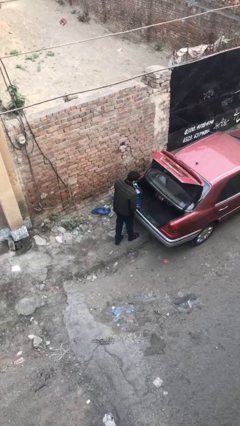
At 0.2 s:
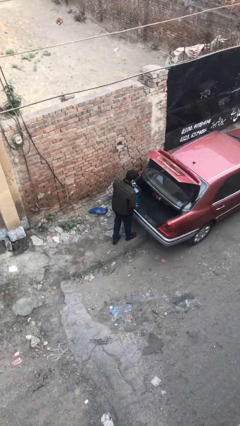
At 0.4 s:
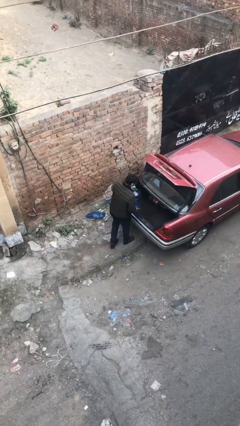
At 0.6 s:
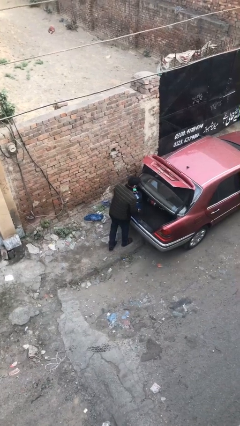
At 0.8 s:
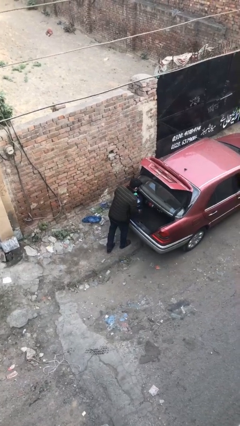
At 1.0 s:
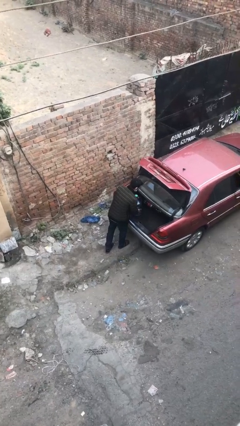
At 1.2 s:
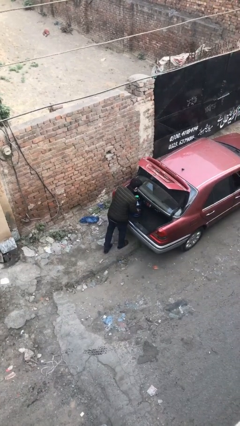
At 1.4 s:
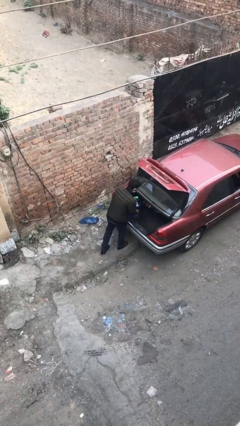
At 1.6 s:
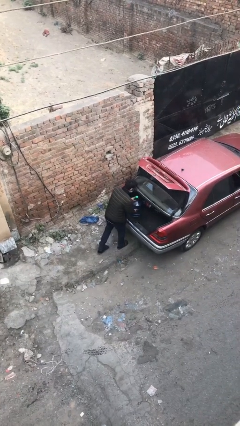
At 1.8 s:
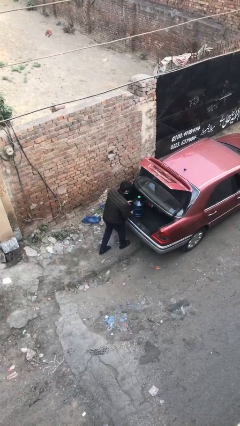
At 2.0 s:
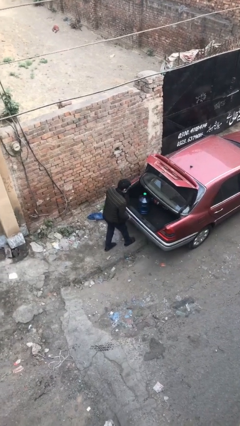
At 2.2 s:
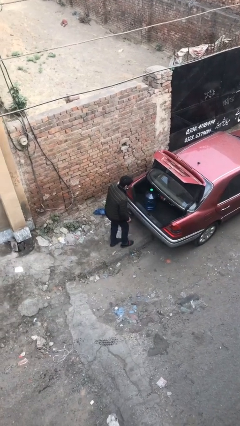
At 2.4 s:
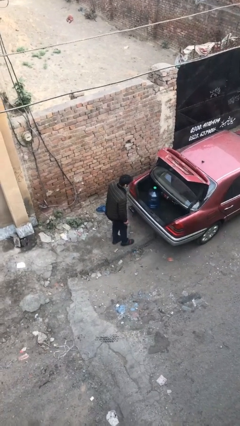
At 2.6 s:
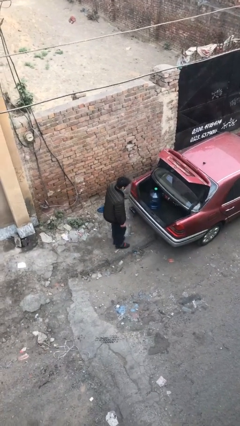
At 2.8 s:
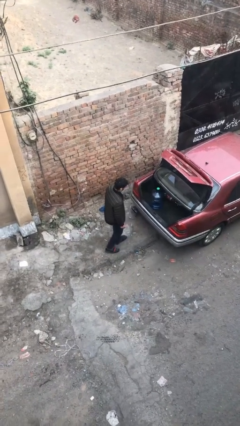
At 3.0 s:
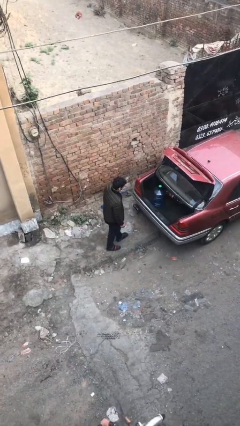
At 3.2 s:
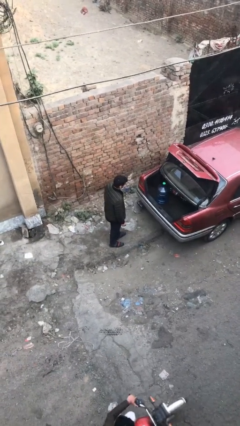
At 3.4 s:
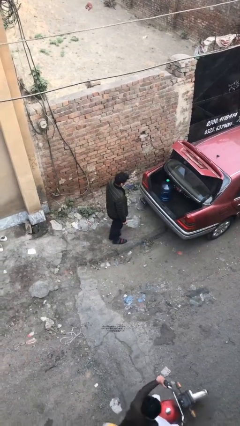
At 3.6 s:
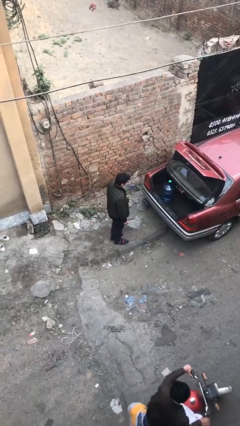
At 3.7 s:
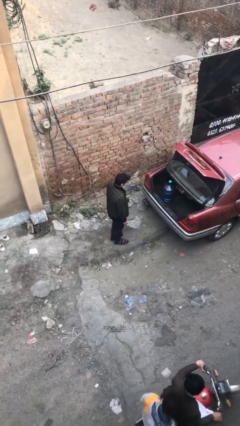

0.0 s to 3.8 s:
person loads car

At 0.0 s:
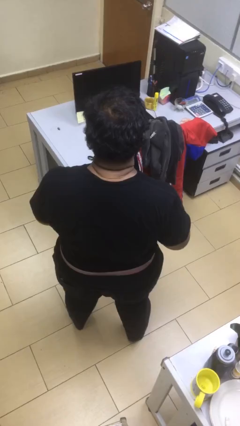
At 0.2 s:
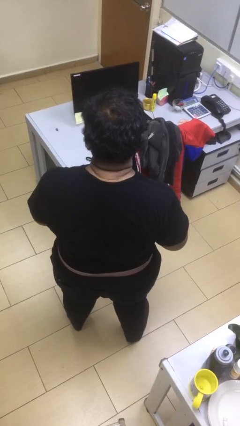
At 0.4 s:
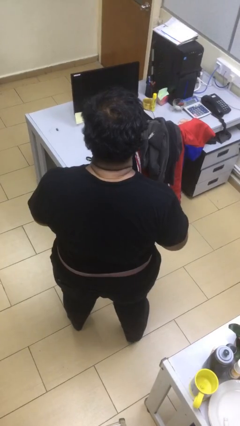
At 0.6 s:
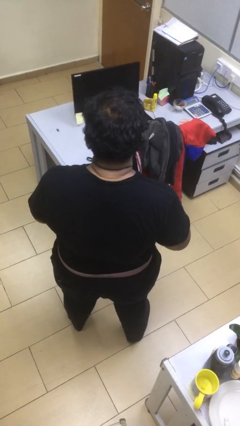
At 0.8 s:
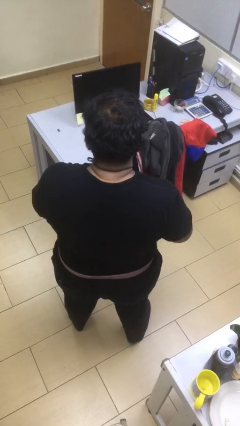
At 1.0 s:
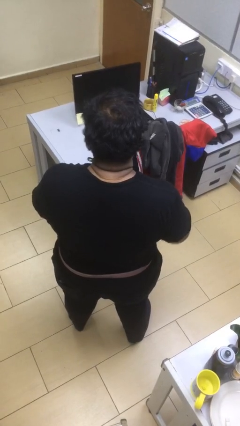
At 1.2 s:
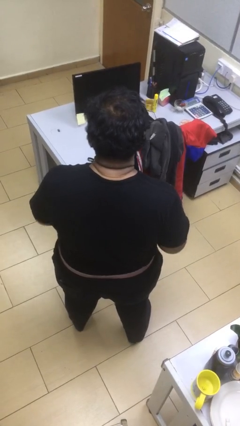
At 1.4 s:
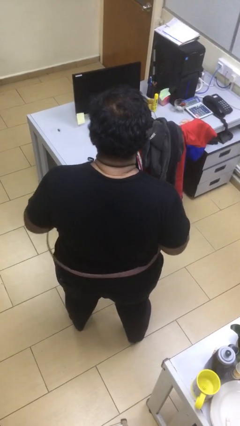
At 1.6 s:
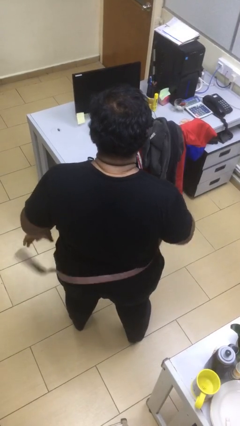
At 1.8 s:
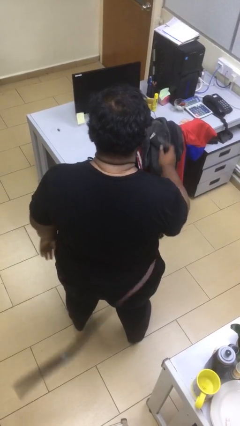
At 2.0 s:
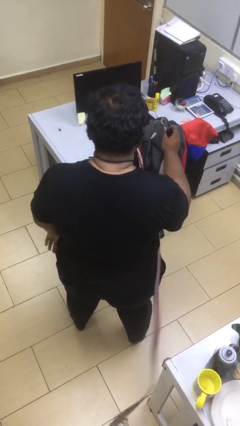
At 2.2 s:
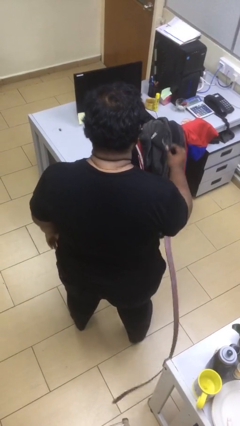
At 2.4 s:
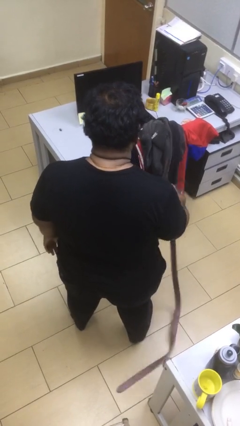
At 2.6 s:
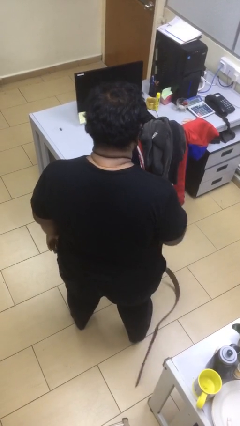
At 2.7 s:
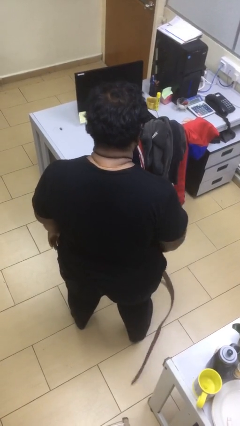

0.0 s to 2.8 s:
person takes off belt

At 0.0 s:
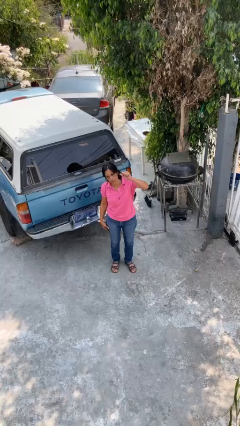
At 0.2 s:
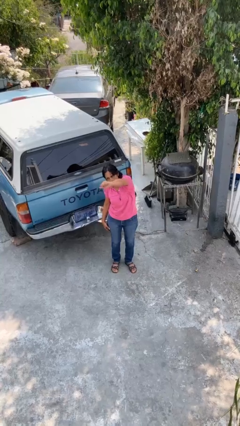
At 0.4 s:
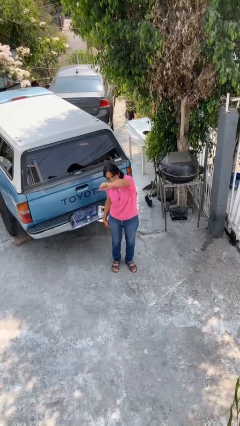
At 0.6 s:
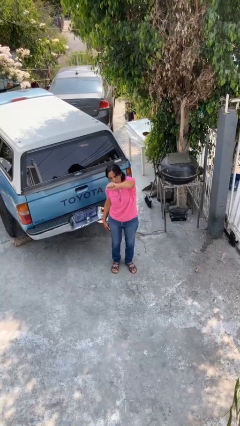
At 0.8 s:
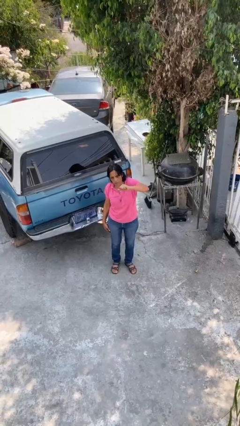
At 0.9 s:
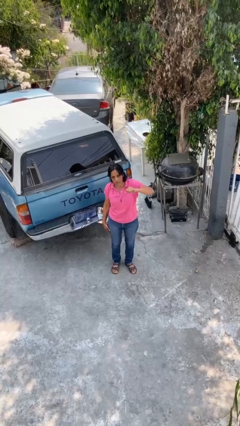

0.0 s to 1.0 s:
person punches

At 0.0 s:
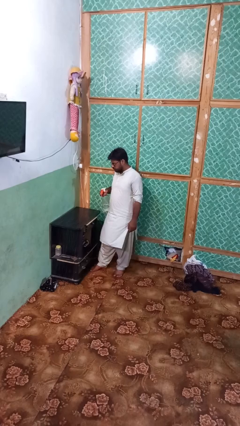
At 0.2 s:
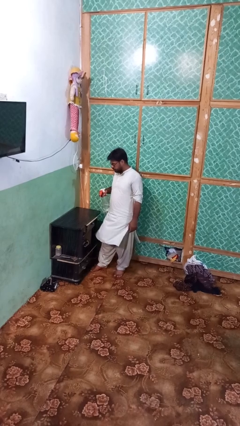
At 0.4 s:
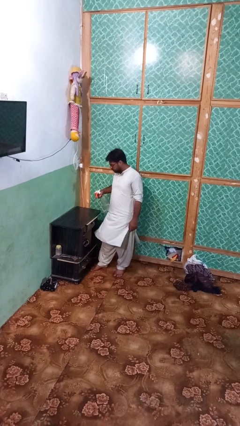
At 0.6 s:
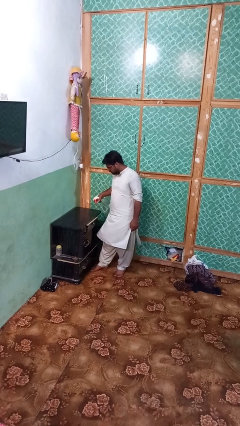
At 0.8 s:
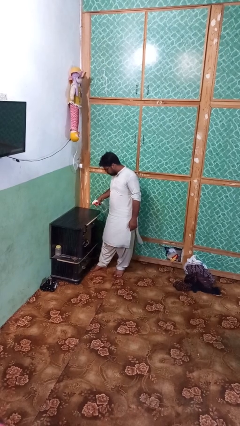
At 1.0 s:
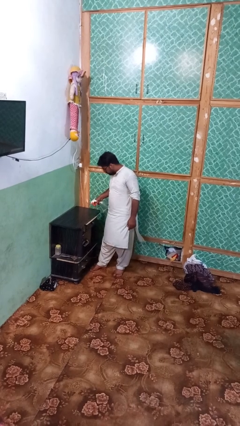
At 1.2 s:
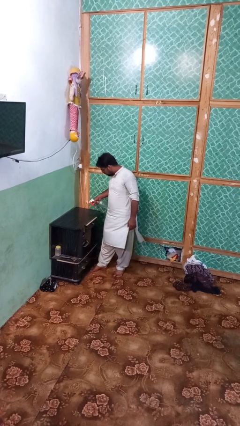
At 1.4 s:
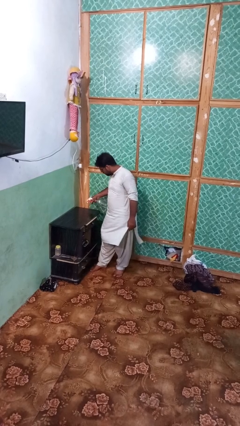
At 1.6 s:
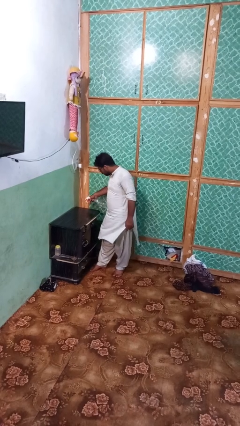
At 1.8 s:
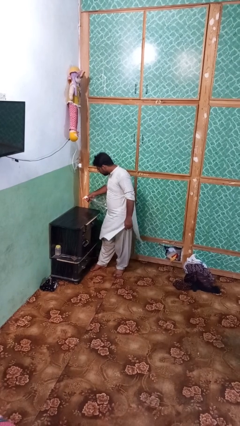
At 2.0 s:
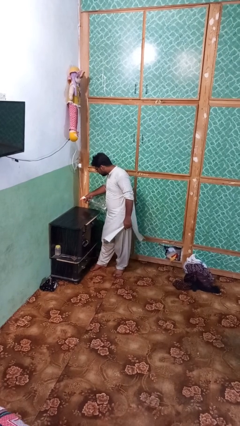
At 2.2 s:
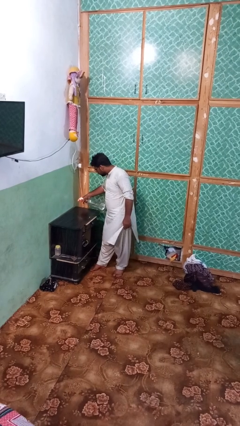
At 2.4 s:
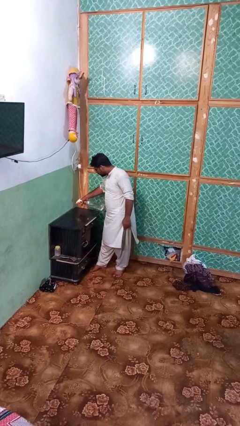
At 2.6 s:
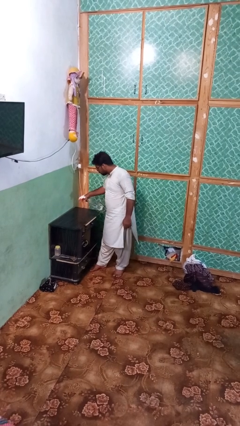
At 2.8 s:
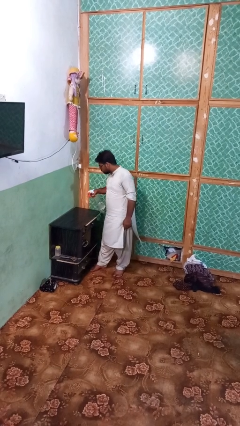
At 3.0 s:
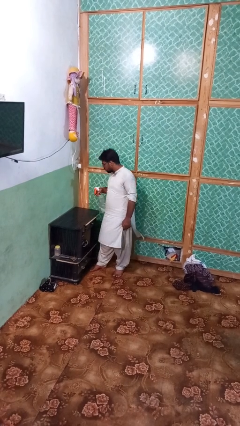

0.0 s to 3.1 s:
person sprays from bottle

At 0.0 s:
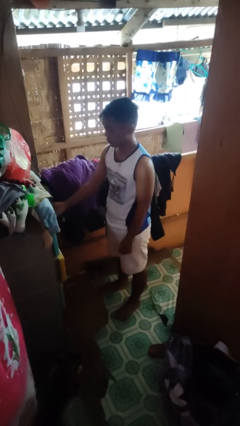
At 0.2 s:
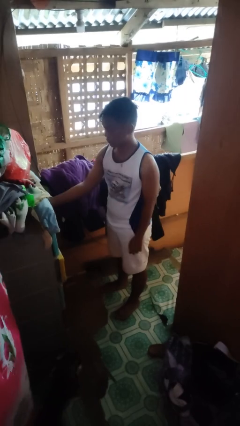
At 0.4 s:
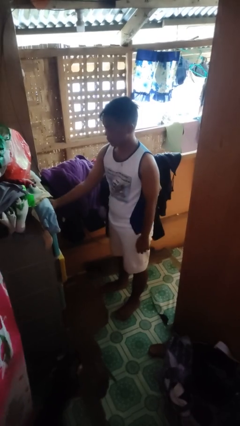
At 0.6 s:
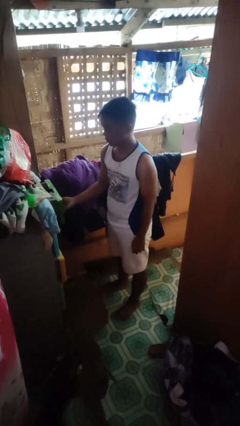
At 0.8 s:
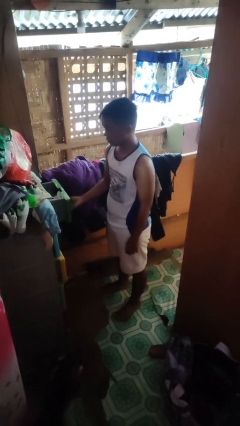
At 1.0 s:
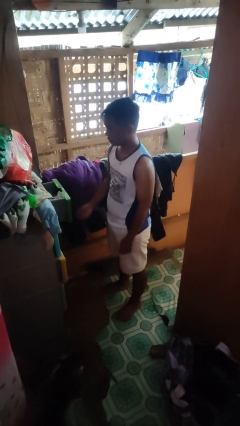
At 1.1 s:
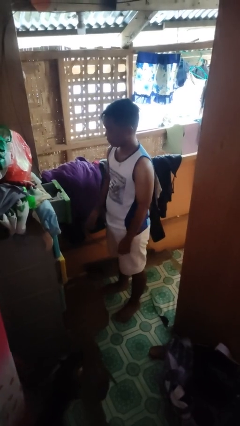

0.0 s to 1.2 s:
person opens dresser drawer

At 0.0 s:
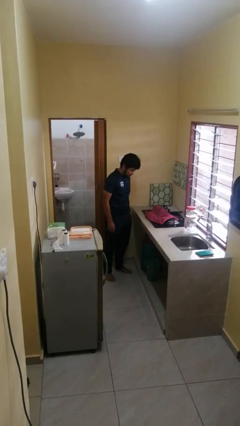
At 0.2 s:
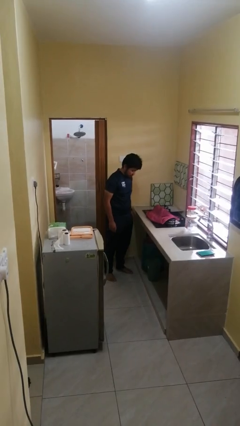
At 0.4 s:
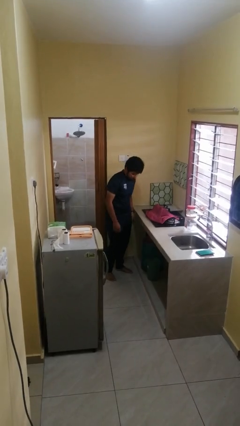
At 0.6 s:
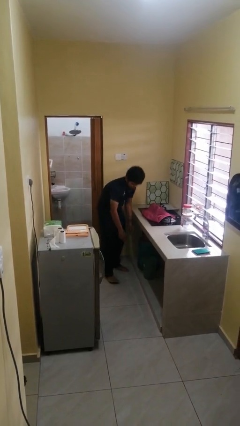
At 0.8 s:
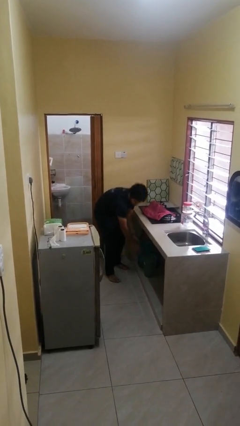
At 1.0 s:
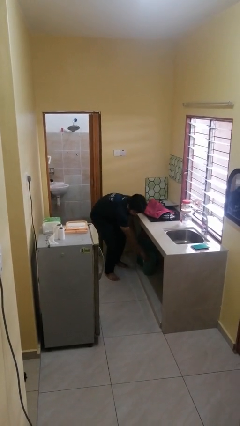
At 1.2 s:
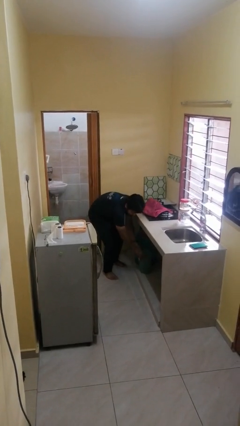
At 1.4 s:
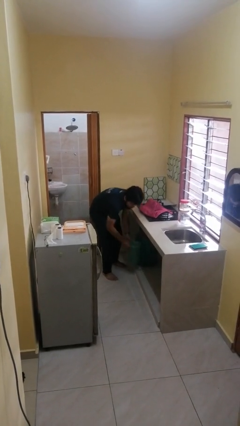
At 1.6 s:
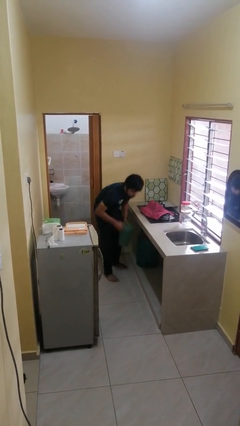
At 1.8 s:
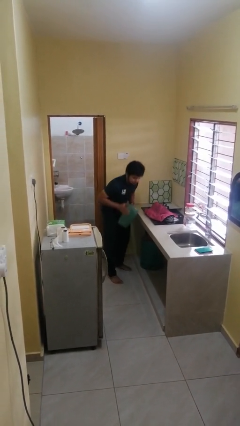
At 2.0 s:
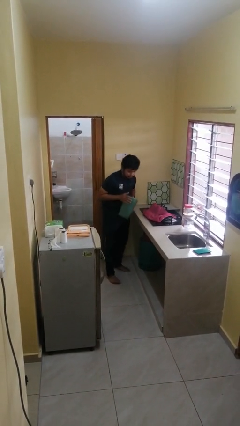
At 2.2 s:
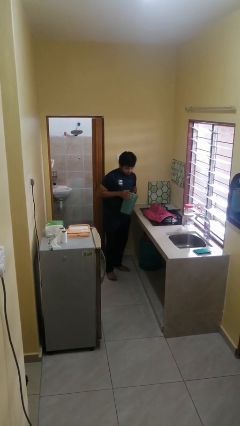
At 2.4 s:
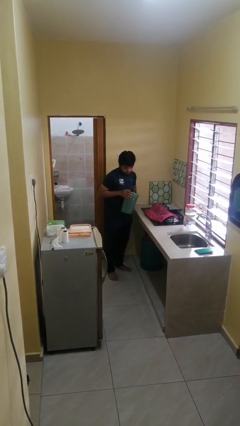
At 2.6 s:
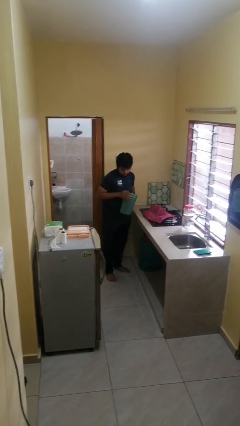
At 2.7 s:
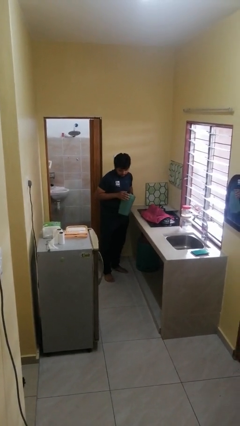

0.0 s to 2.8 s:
person picks up object from cabinet

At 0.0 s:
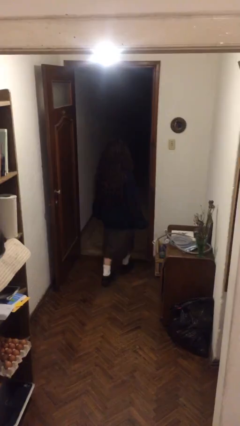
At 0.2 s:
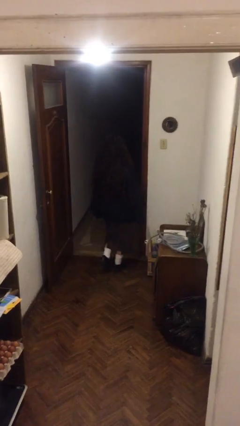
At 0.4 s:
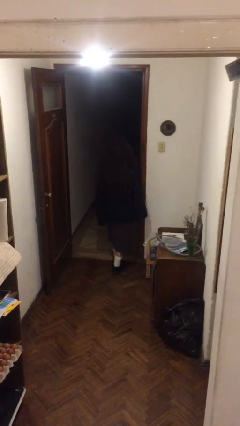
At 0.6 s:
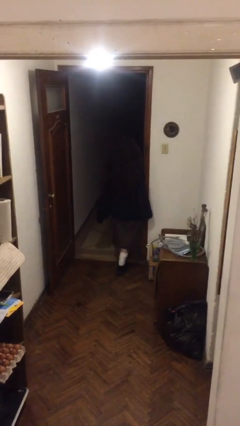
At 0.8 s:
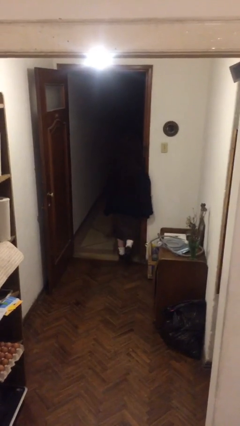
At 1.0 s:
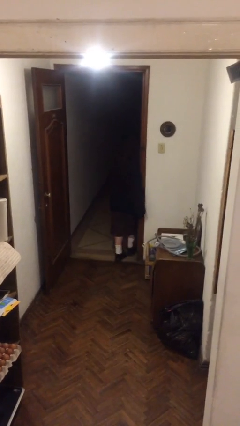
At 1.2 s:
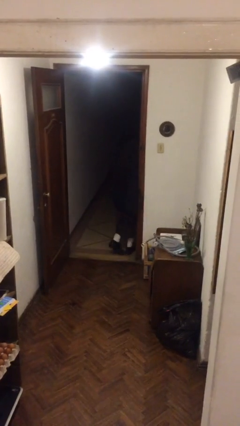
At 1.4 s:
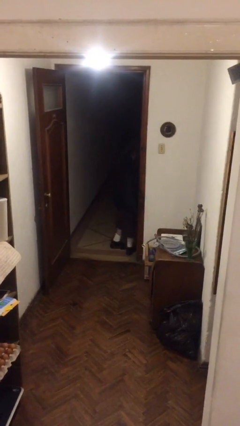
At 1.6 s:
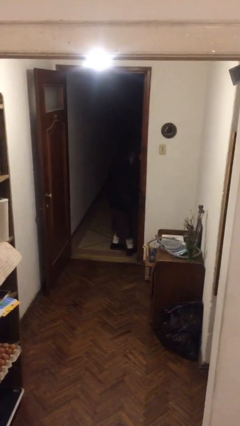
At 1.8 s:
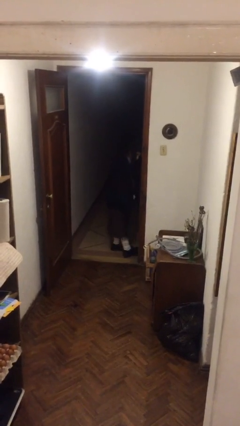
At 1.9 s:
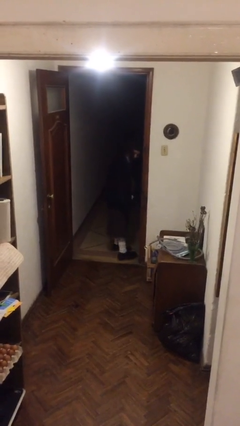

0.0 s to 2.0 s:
person bumps into wall

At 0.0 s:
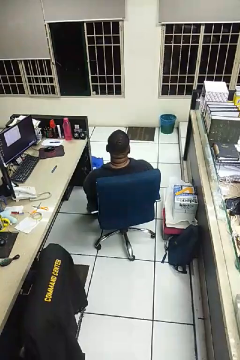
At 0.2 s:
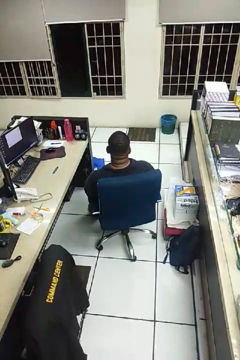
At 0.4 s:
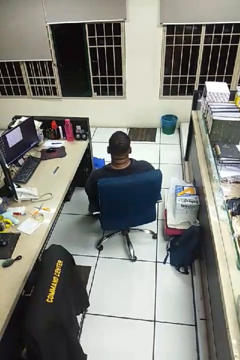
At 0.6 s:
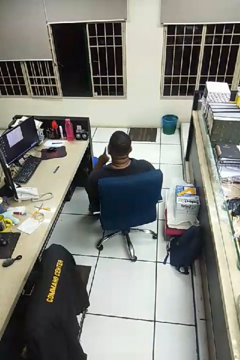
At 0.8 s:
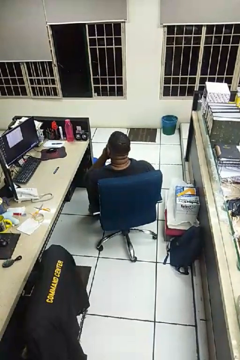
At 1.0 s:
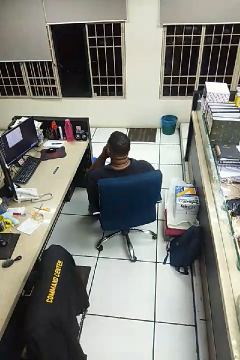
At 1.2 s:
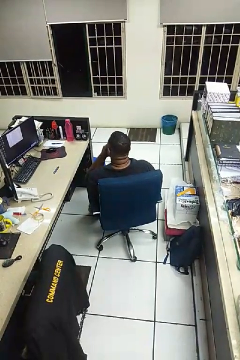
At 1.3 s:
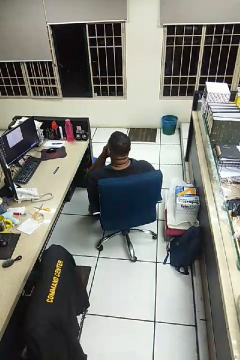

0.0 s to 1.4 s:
person gestures be quiet
